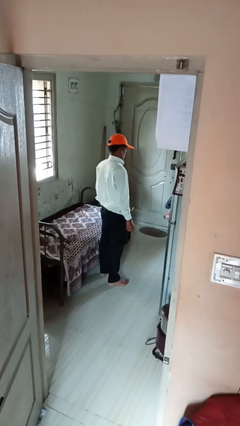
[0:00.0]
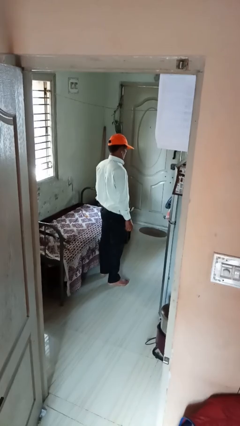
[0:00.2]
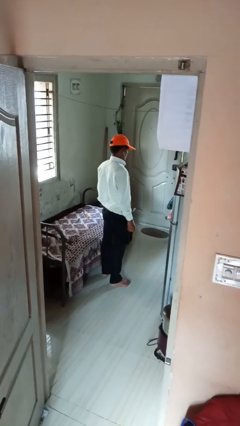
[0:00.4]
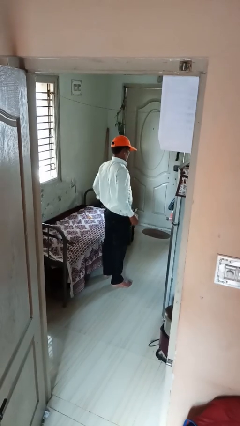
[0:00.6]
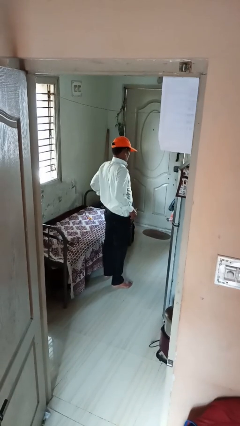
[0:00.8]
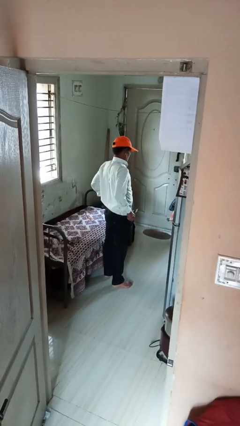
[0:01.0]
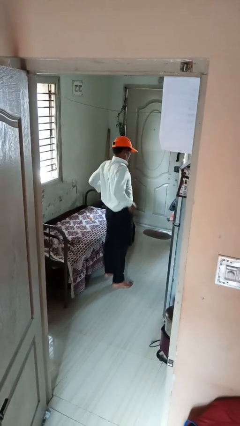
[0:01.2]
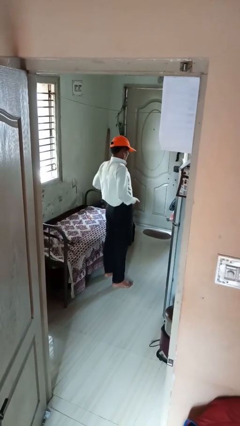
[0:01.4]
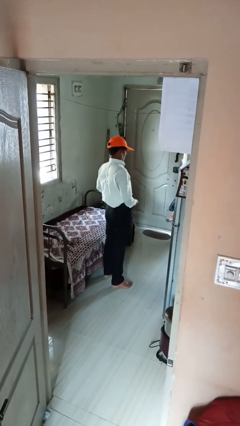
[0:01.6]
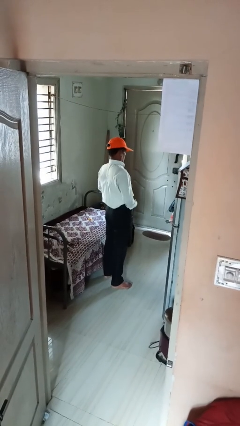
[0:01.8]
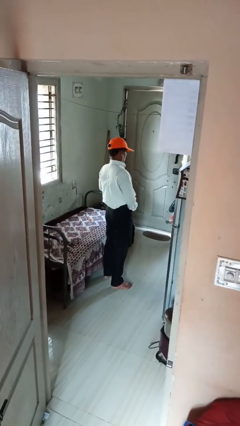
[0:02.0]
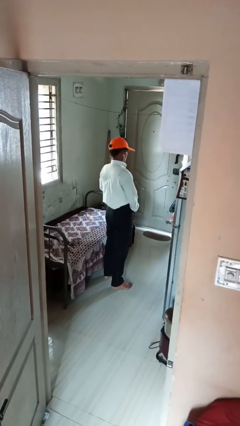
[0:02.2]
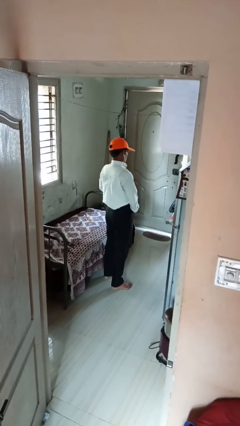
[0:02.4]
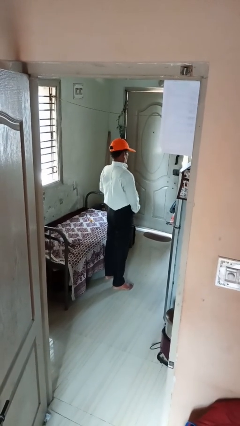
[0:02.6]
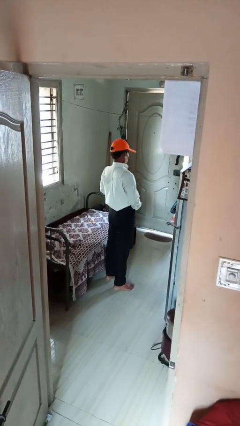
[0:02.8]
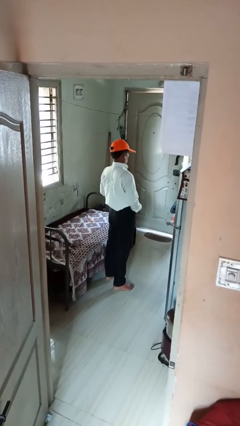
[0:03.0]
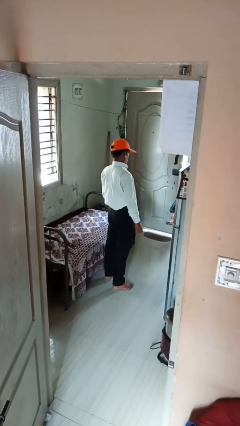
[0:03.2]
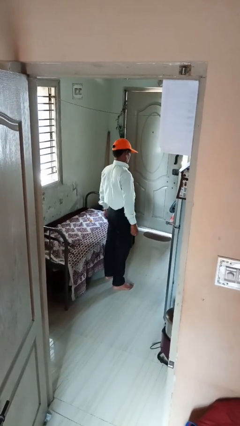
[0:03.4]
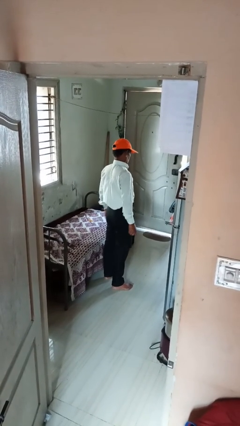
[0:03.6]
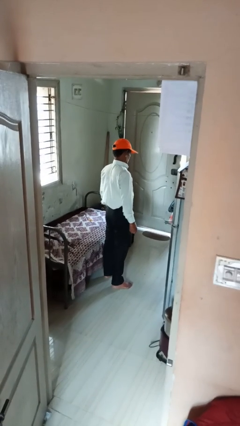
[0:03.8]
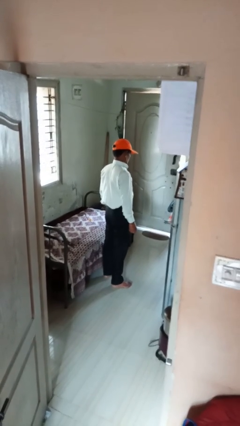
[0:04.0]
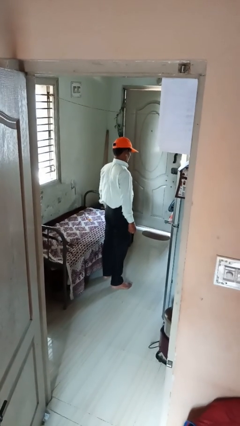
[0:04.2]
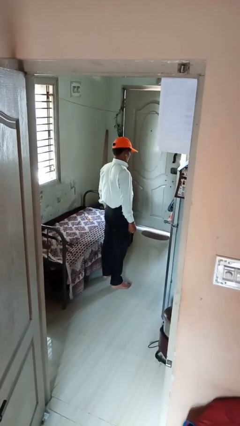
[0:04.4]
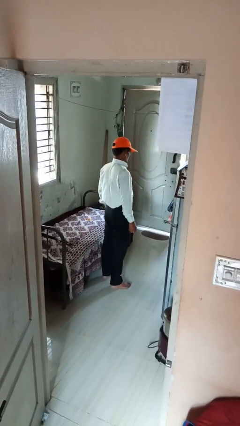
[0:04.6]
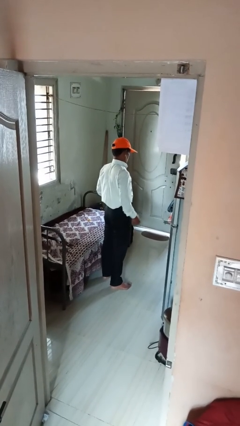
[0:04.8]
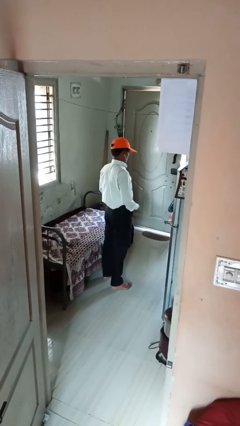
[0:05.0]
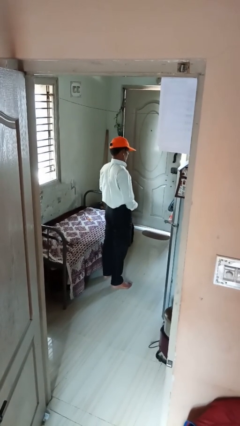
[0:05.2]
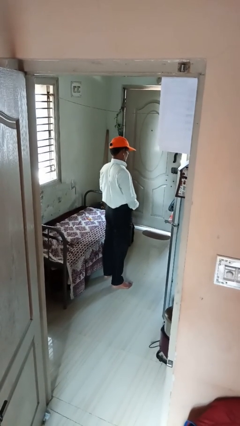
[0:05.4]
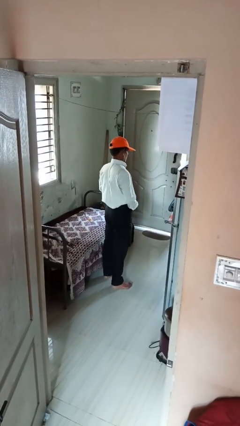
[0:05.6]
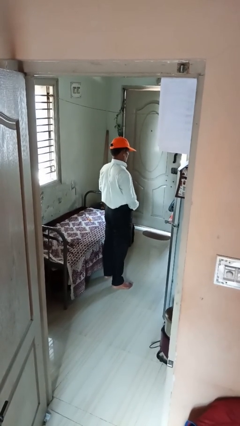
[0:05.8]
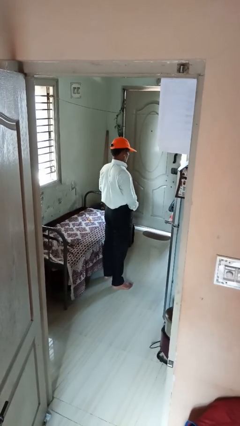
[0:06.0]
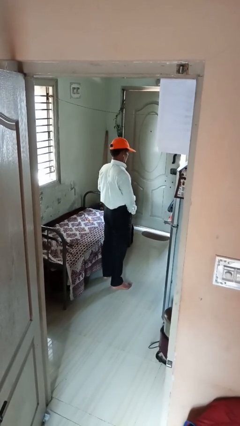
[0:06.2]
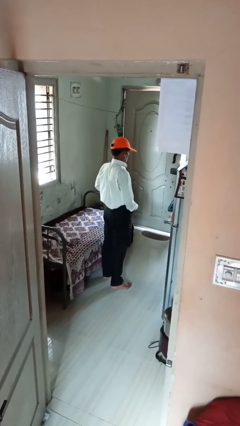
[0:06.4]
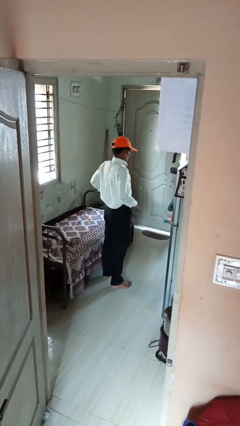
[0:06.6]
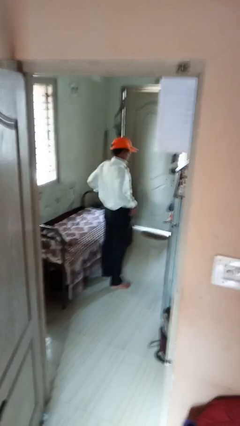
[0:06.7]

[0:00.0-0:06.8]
person hikes up pants

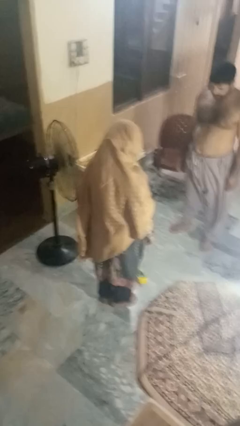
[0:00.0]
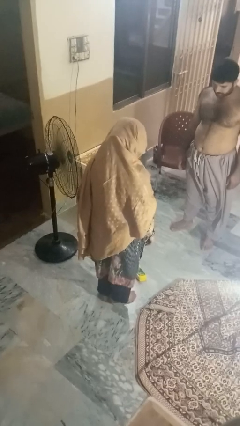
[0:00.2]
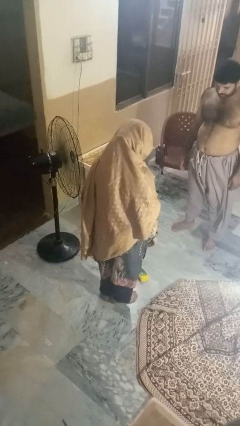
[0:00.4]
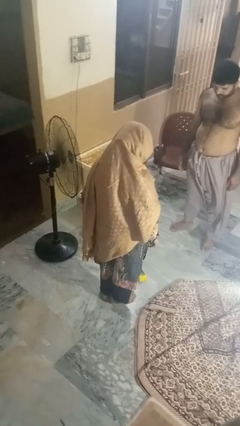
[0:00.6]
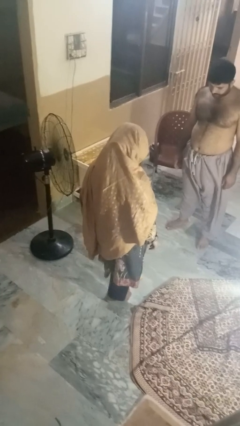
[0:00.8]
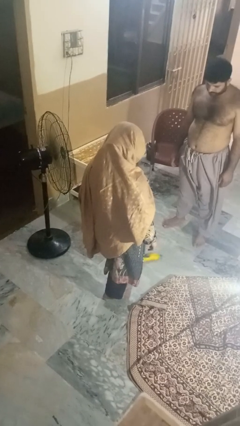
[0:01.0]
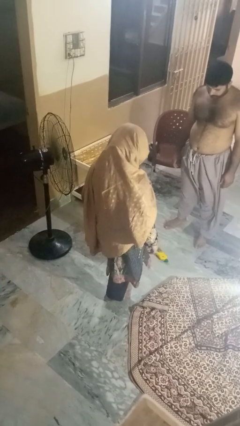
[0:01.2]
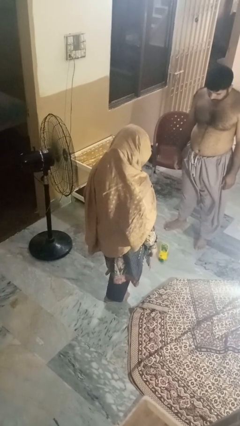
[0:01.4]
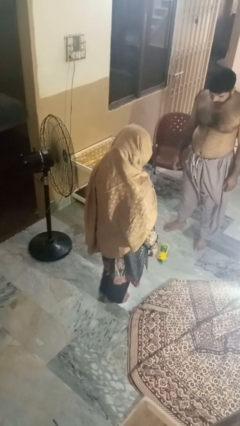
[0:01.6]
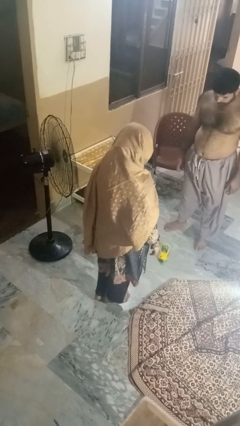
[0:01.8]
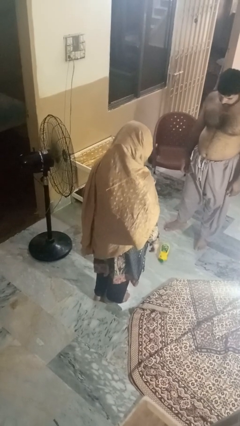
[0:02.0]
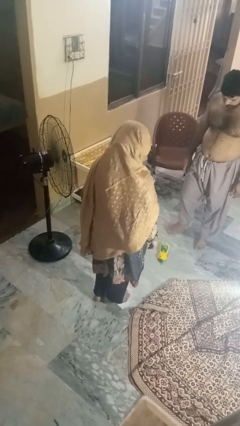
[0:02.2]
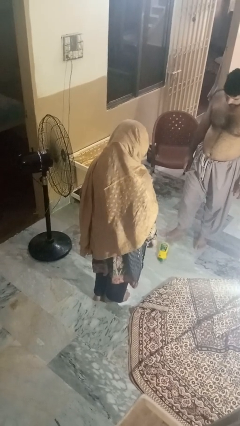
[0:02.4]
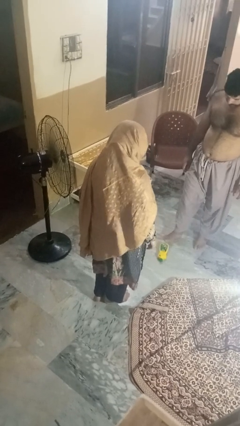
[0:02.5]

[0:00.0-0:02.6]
person kicks object to person

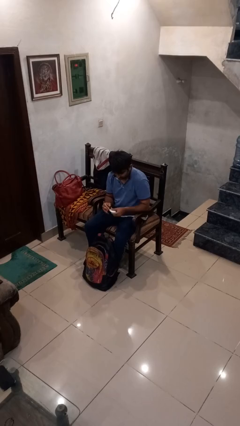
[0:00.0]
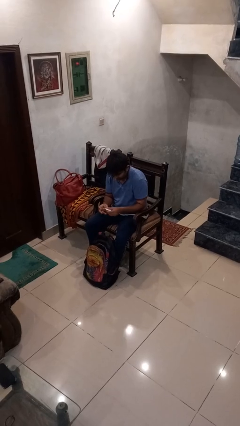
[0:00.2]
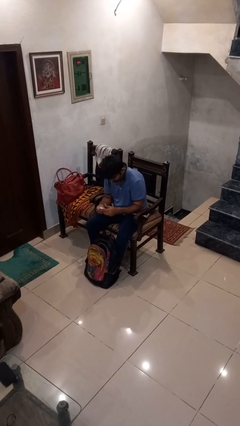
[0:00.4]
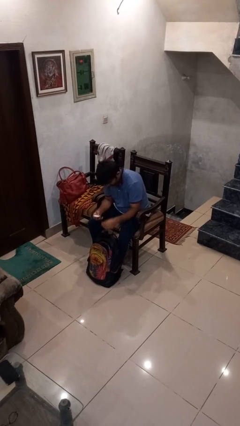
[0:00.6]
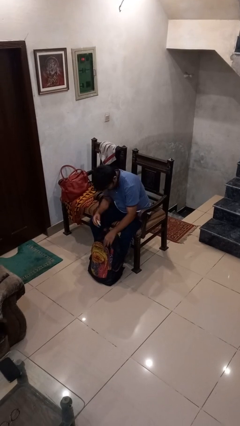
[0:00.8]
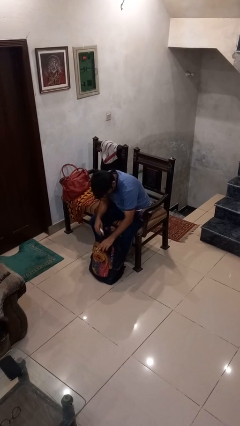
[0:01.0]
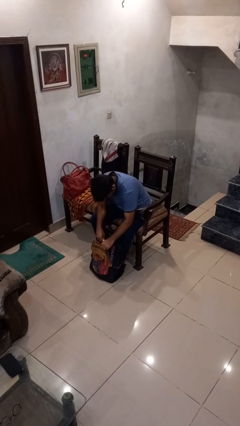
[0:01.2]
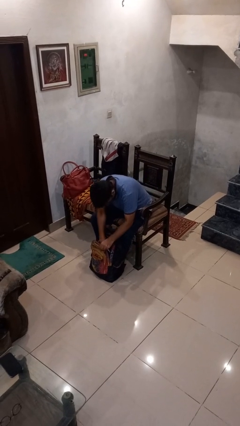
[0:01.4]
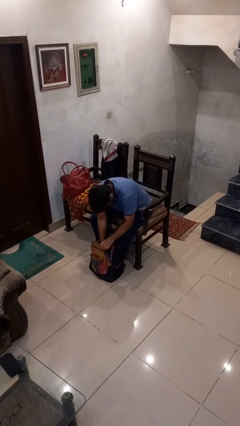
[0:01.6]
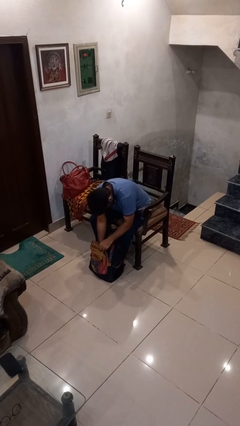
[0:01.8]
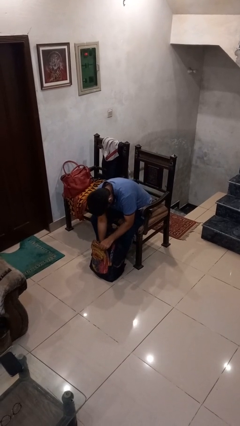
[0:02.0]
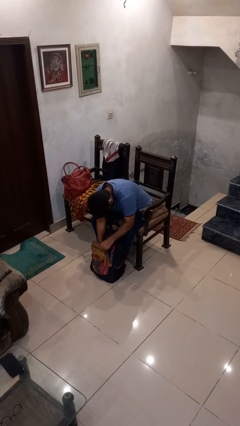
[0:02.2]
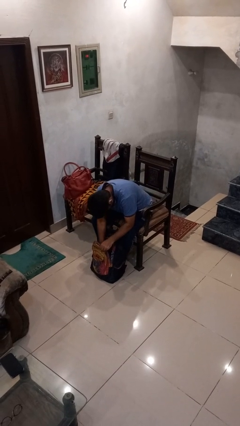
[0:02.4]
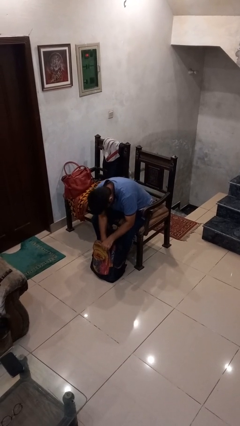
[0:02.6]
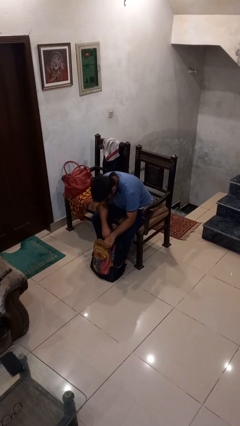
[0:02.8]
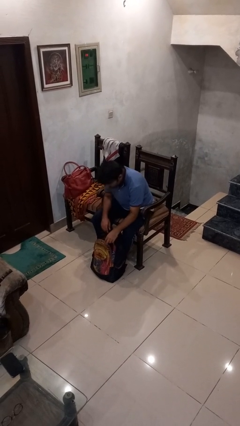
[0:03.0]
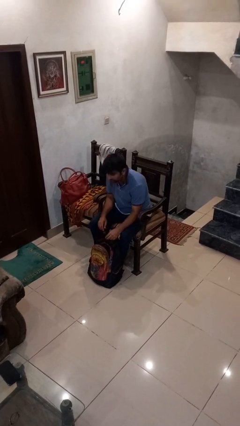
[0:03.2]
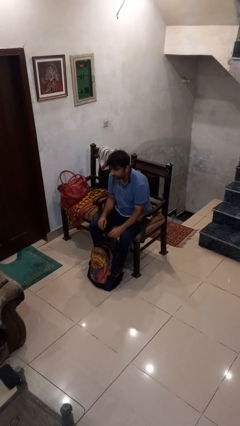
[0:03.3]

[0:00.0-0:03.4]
person puts object into backpack

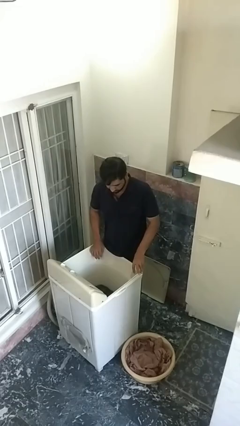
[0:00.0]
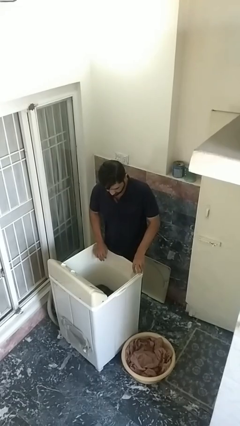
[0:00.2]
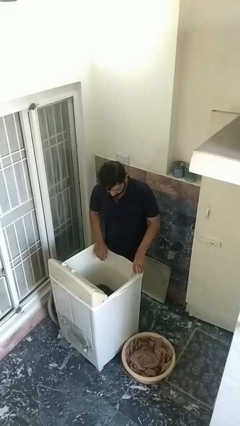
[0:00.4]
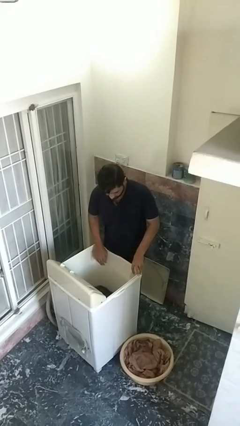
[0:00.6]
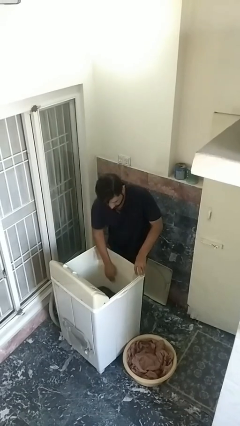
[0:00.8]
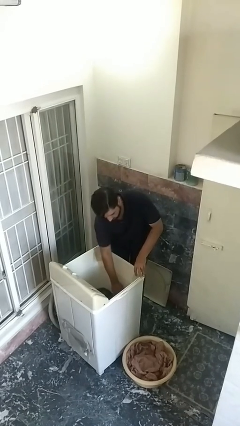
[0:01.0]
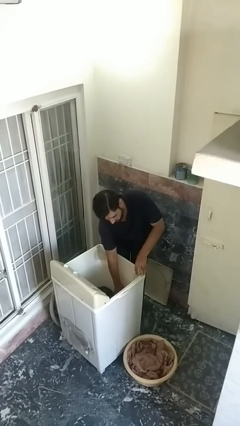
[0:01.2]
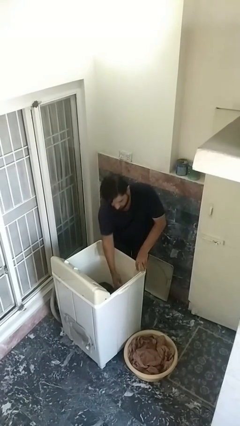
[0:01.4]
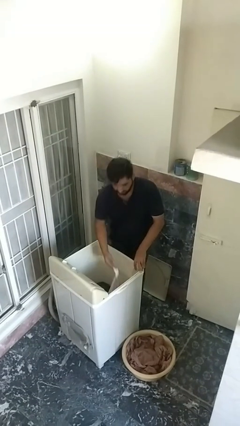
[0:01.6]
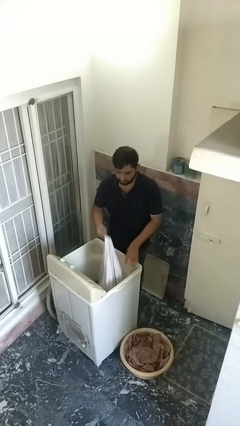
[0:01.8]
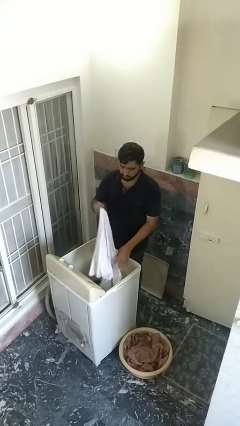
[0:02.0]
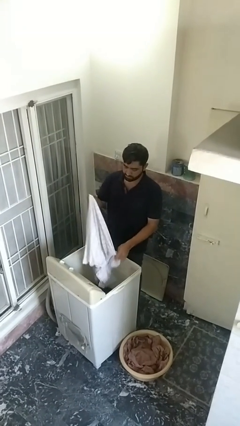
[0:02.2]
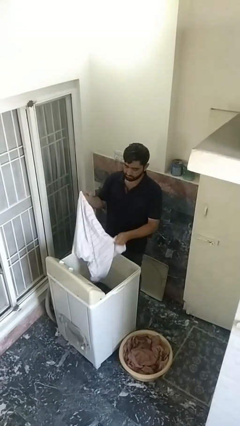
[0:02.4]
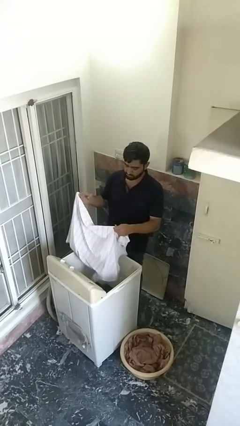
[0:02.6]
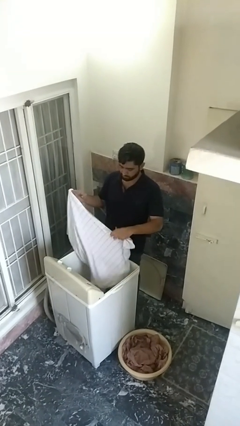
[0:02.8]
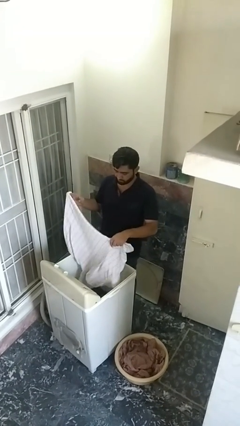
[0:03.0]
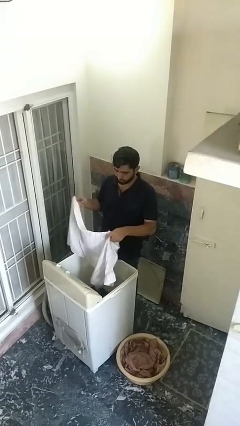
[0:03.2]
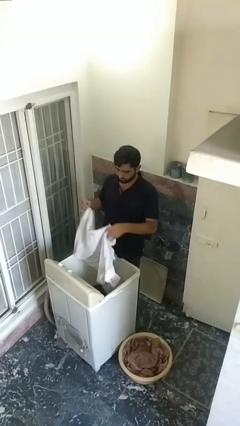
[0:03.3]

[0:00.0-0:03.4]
person unloads clotheswasher

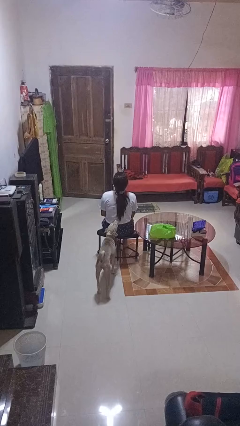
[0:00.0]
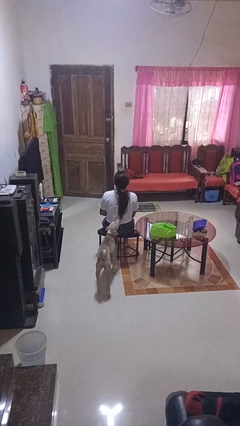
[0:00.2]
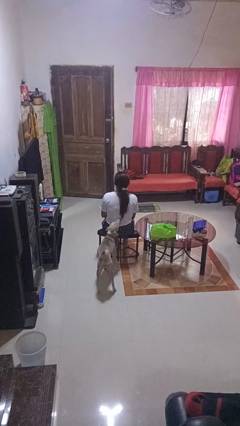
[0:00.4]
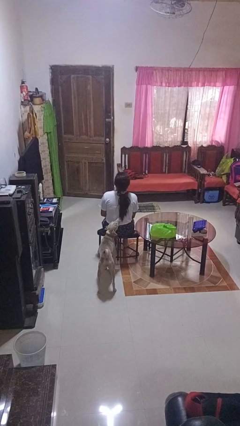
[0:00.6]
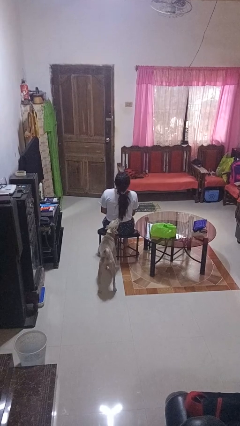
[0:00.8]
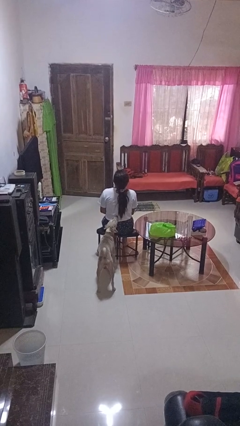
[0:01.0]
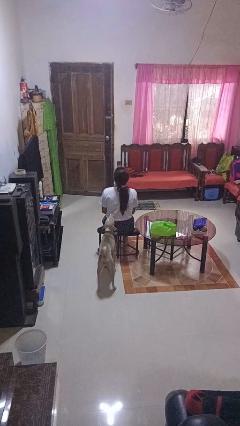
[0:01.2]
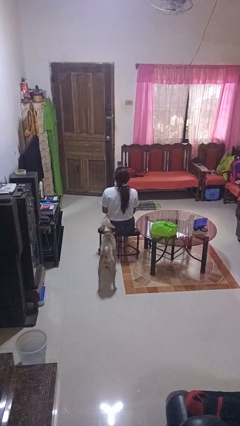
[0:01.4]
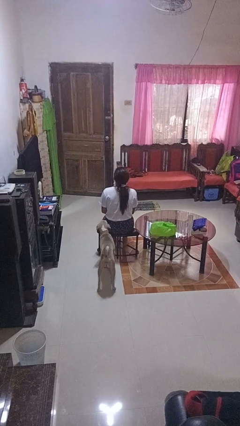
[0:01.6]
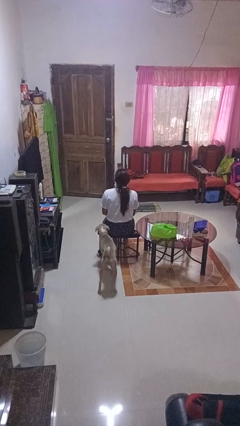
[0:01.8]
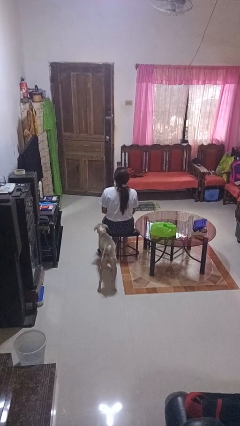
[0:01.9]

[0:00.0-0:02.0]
person nods head
